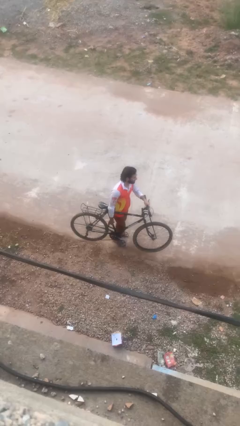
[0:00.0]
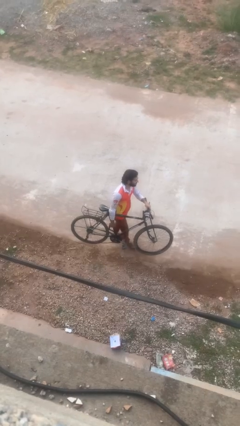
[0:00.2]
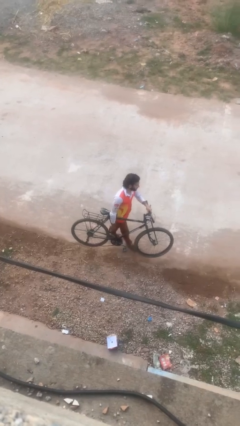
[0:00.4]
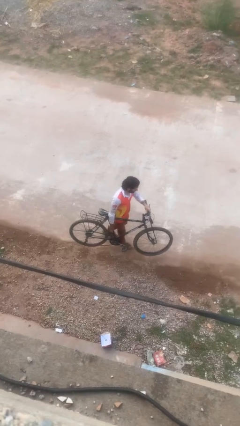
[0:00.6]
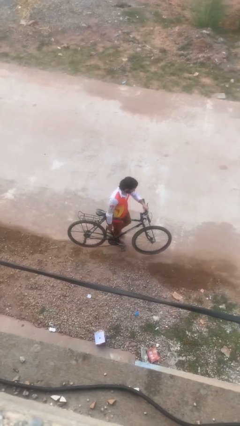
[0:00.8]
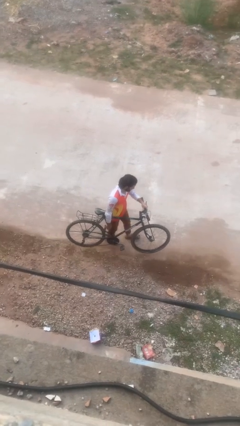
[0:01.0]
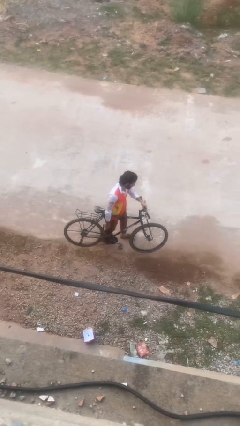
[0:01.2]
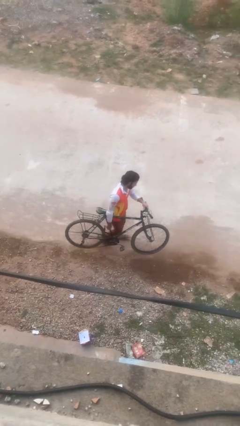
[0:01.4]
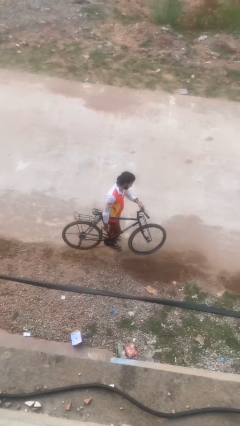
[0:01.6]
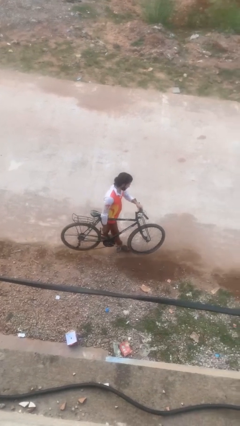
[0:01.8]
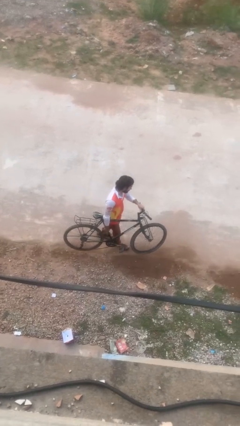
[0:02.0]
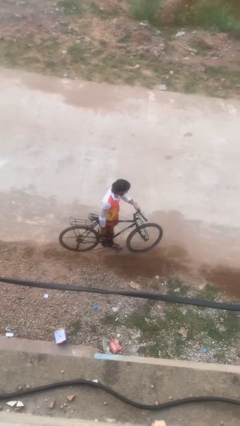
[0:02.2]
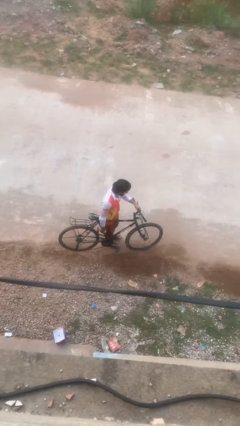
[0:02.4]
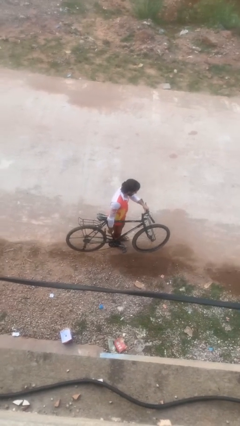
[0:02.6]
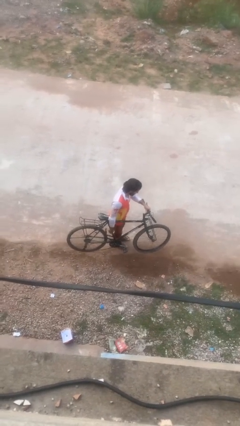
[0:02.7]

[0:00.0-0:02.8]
person carries bicycle

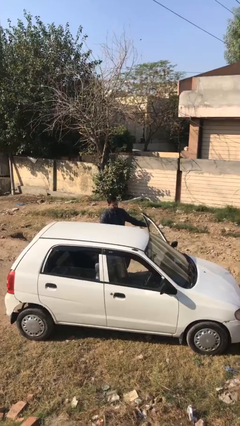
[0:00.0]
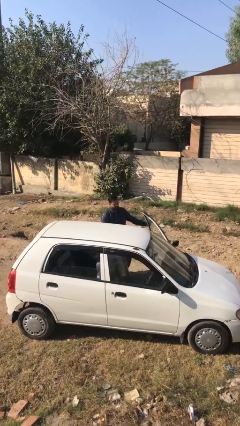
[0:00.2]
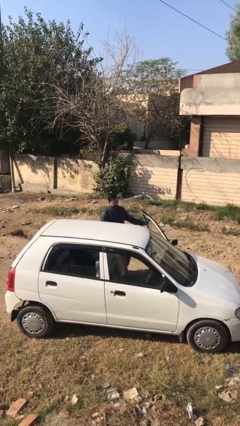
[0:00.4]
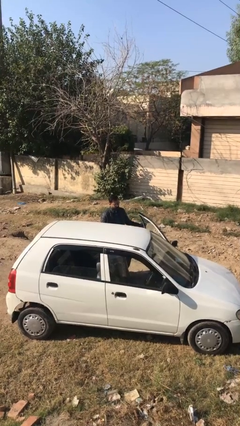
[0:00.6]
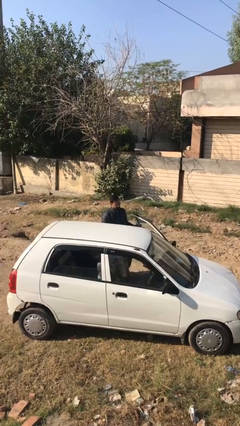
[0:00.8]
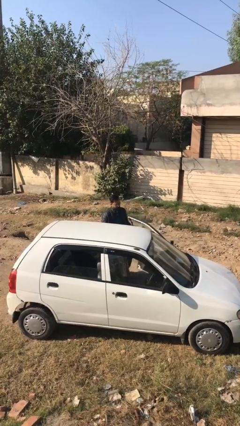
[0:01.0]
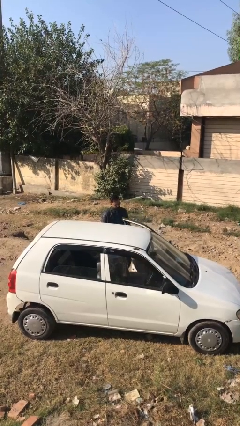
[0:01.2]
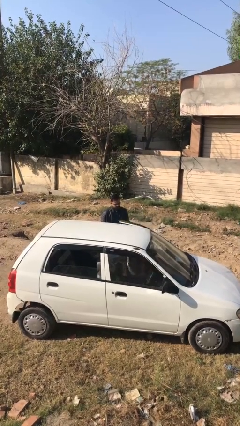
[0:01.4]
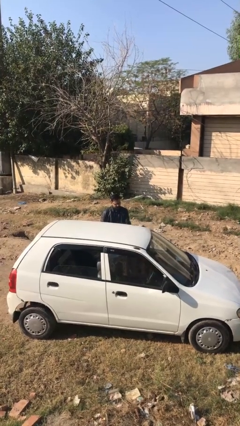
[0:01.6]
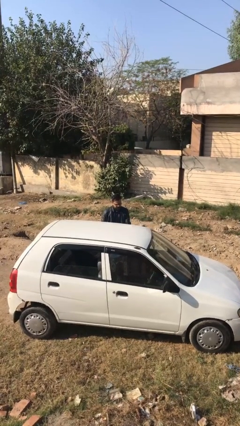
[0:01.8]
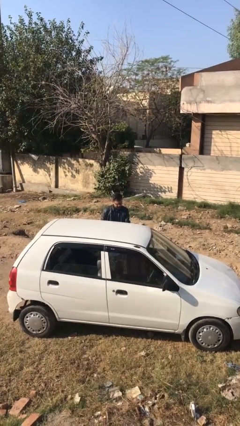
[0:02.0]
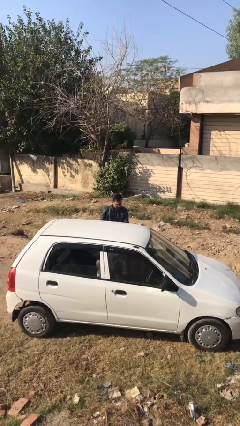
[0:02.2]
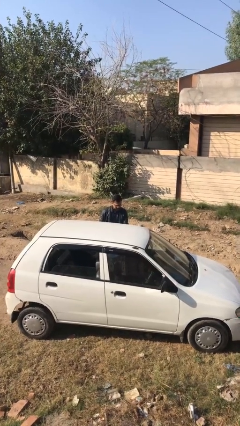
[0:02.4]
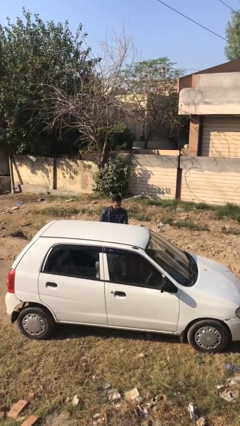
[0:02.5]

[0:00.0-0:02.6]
person closes car door

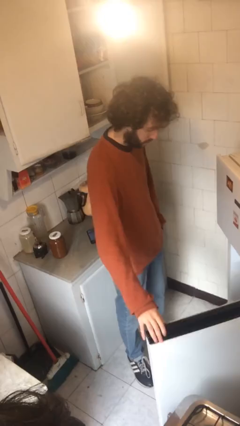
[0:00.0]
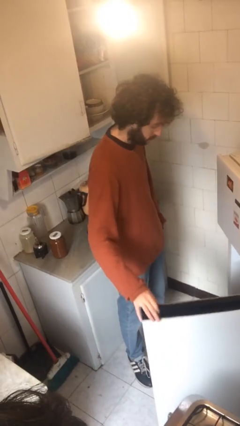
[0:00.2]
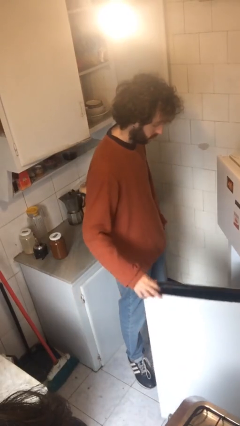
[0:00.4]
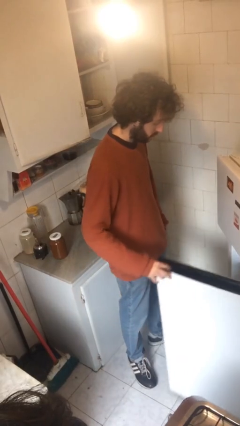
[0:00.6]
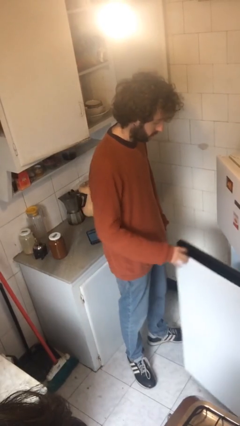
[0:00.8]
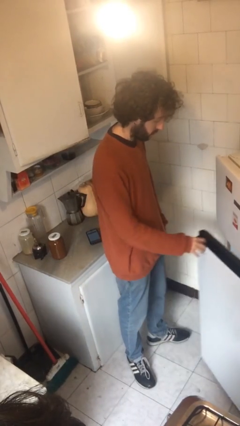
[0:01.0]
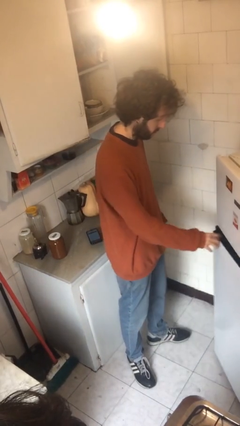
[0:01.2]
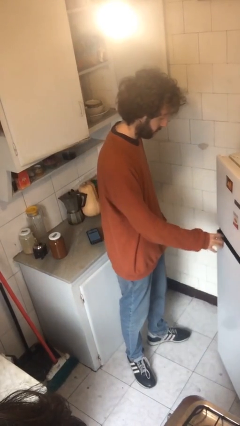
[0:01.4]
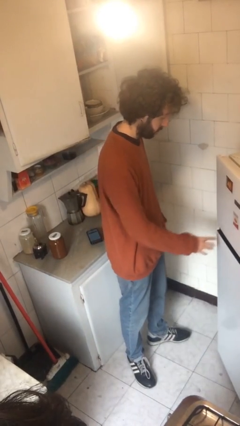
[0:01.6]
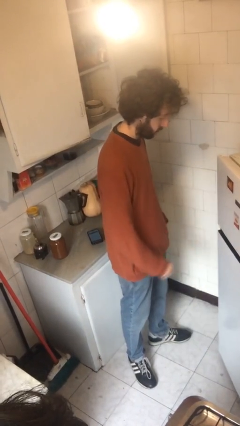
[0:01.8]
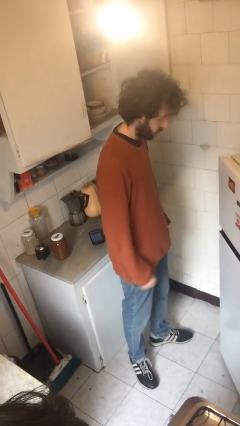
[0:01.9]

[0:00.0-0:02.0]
person closes refrigerator

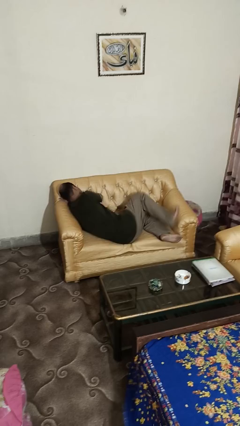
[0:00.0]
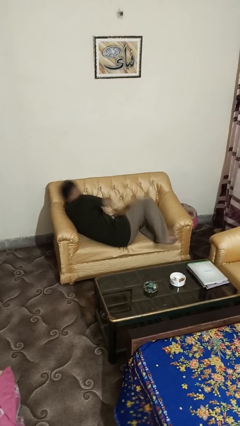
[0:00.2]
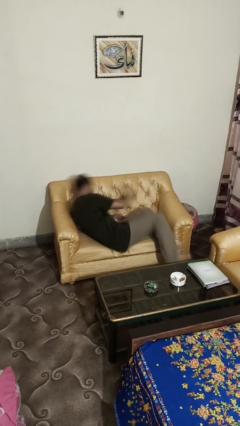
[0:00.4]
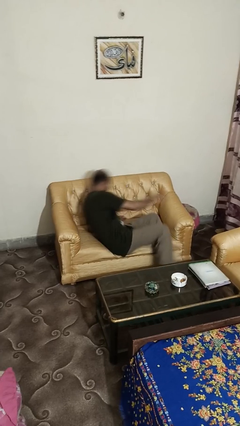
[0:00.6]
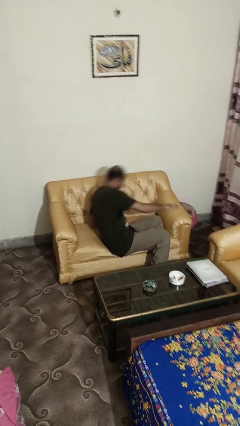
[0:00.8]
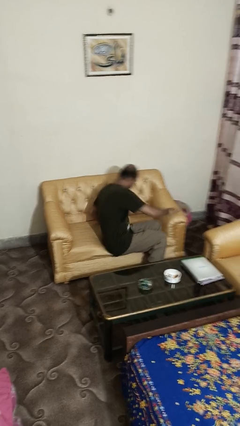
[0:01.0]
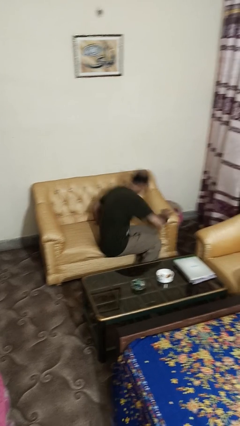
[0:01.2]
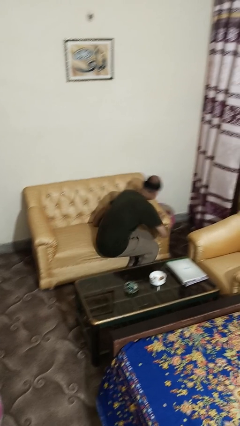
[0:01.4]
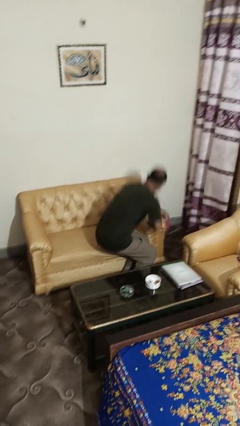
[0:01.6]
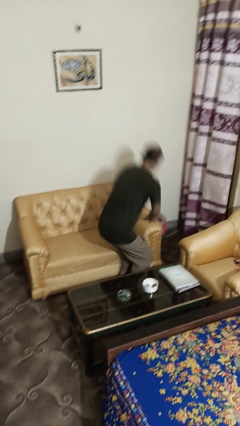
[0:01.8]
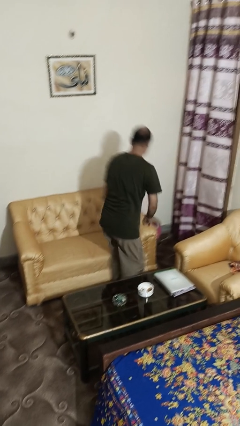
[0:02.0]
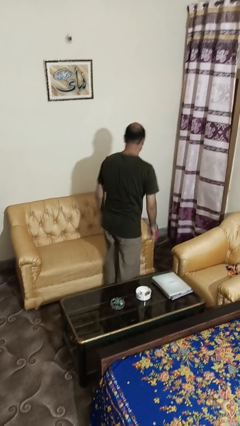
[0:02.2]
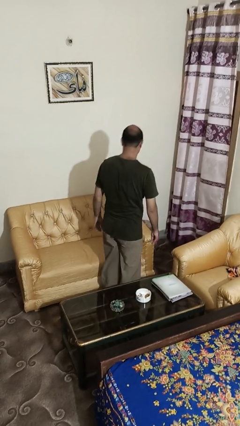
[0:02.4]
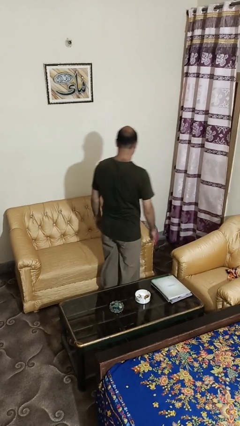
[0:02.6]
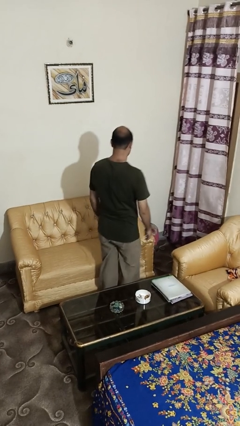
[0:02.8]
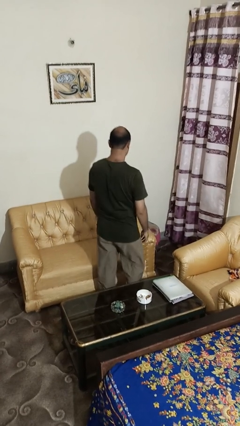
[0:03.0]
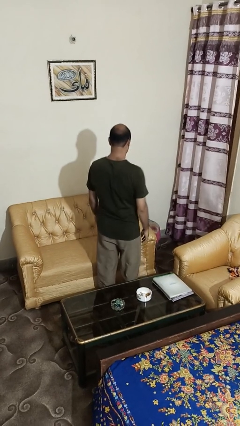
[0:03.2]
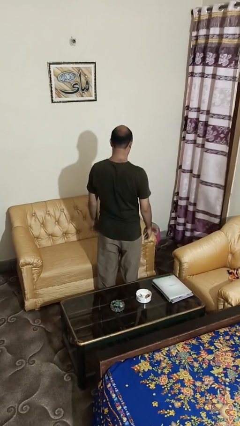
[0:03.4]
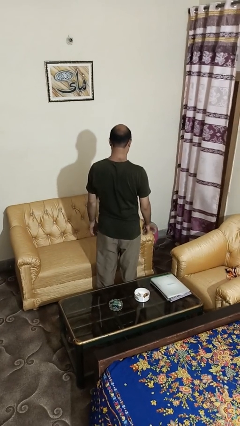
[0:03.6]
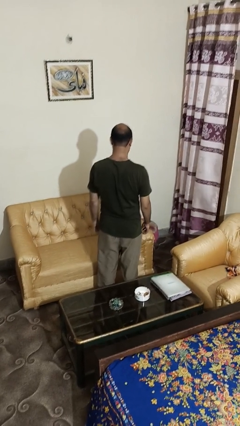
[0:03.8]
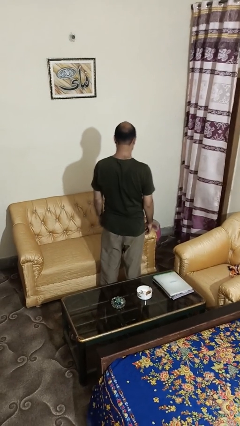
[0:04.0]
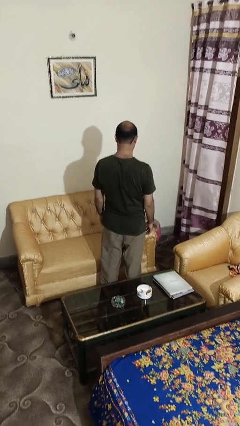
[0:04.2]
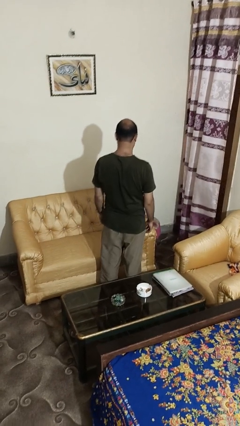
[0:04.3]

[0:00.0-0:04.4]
person stands up

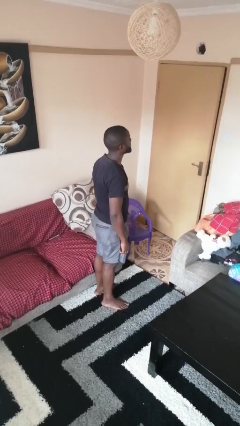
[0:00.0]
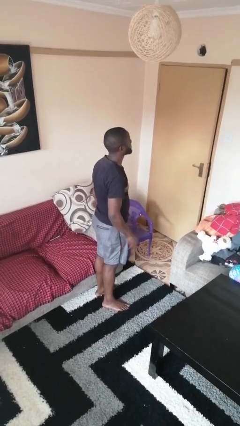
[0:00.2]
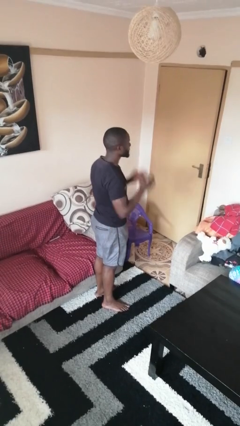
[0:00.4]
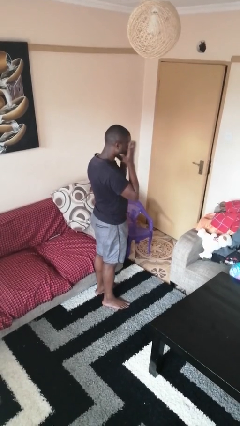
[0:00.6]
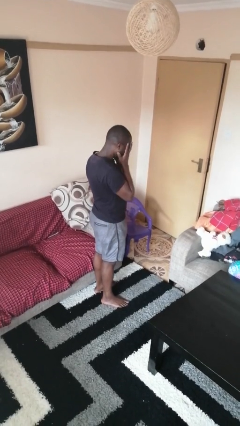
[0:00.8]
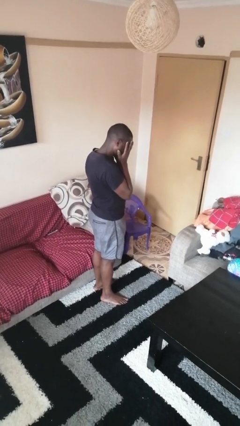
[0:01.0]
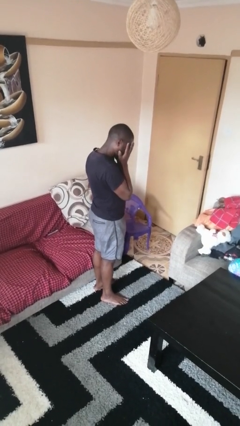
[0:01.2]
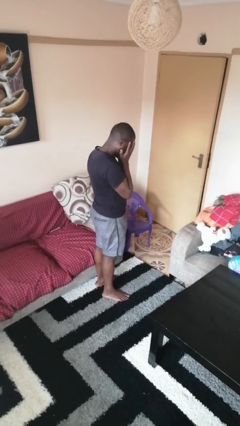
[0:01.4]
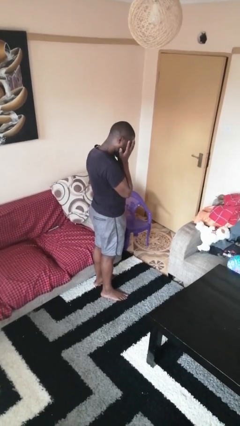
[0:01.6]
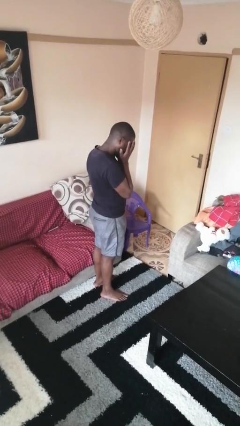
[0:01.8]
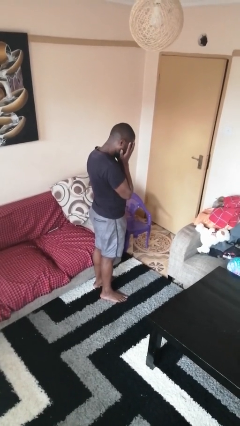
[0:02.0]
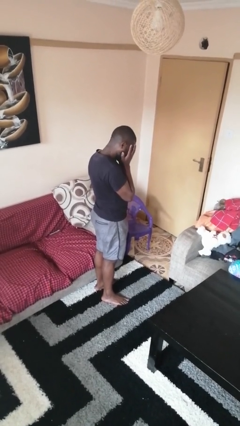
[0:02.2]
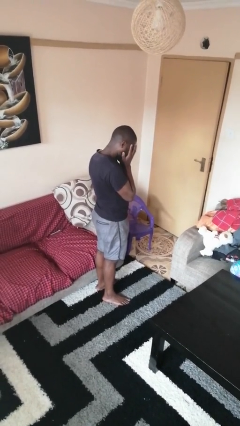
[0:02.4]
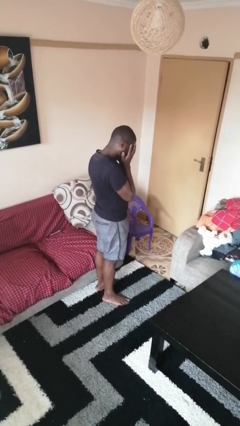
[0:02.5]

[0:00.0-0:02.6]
person covers face with hands

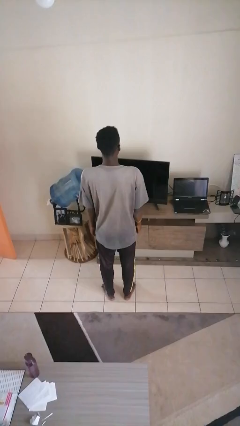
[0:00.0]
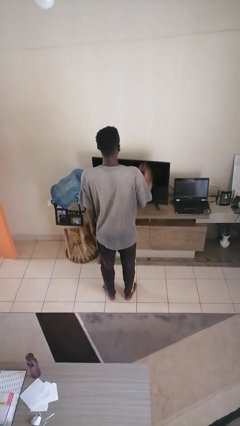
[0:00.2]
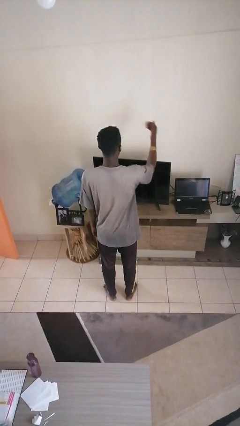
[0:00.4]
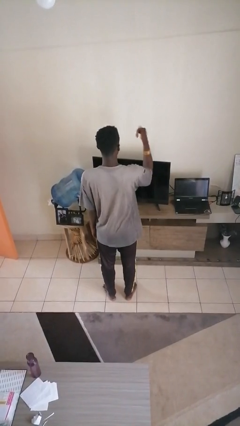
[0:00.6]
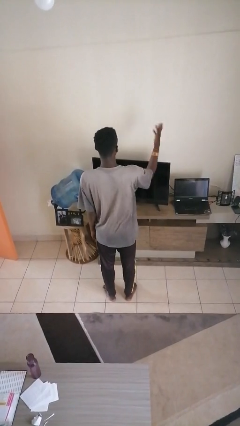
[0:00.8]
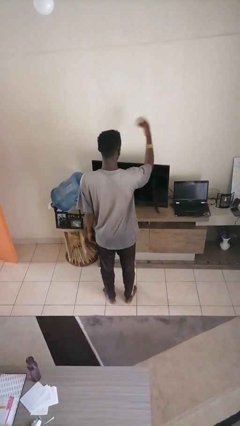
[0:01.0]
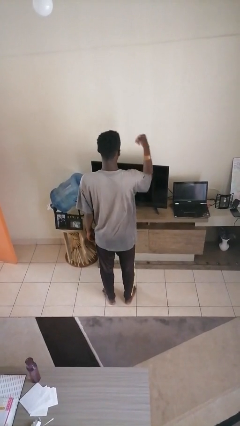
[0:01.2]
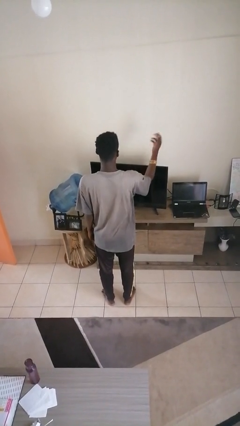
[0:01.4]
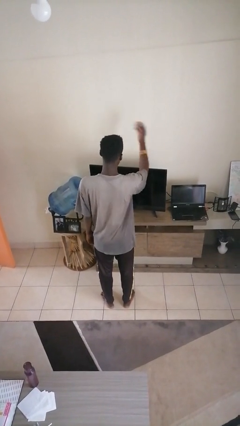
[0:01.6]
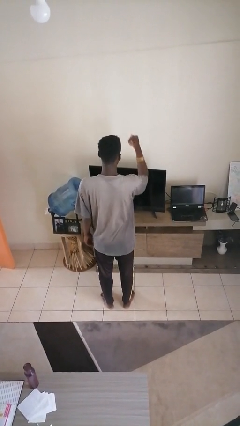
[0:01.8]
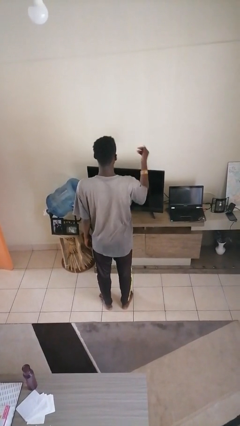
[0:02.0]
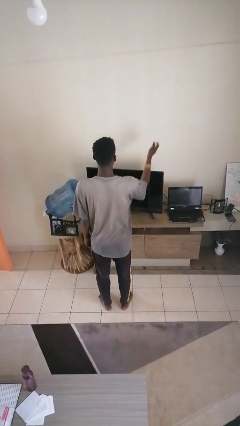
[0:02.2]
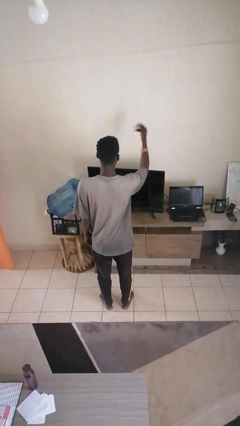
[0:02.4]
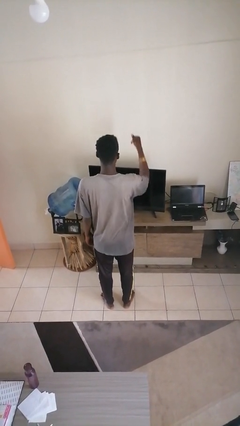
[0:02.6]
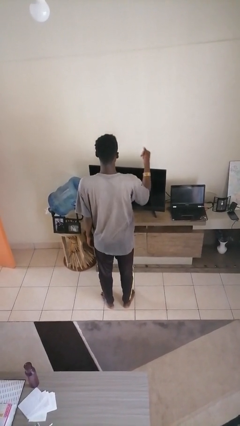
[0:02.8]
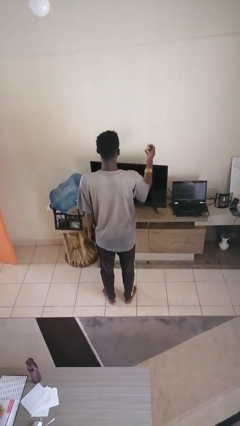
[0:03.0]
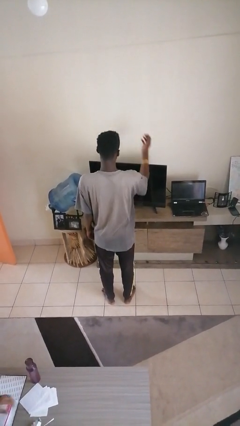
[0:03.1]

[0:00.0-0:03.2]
person gestures come here
